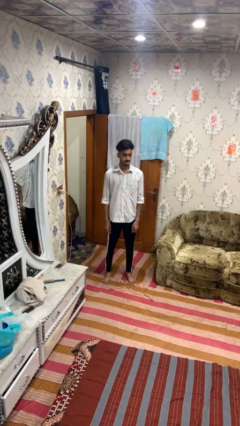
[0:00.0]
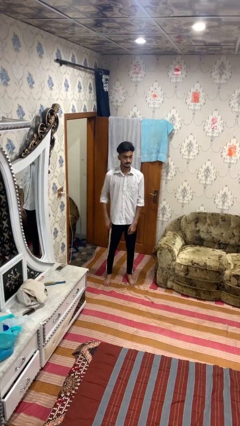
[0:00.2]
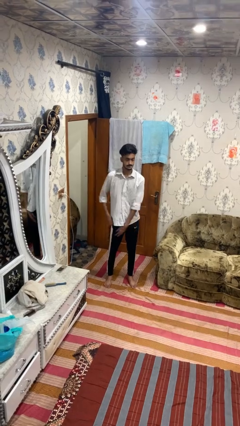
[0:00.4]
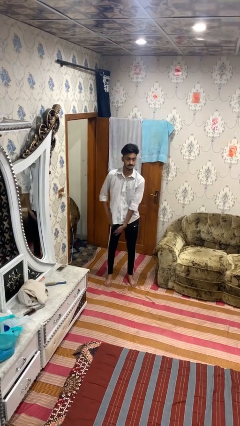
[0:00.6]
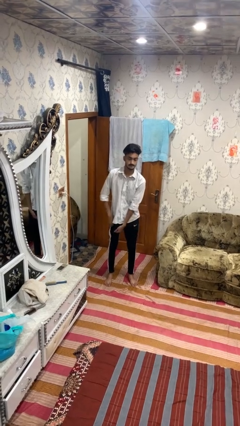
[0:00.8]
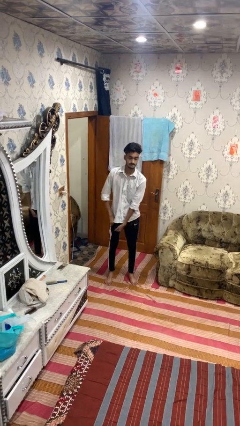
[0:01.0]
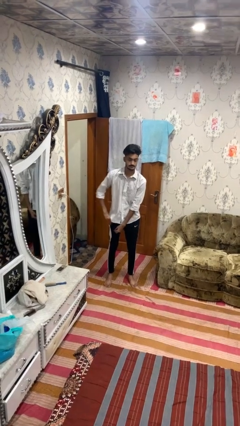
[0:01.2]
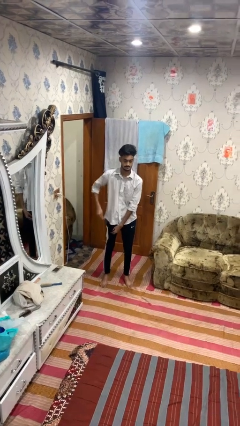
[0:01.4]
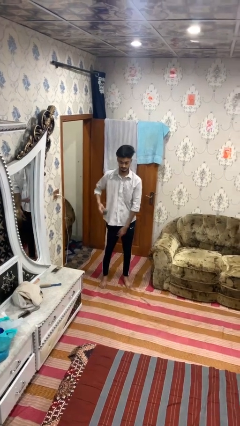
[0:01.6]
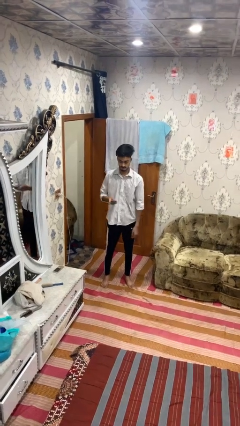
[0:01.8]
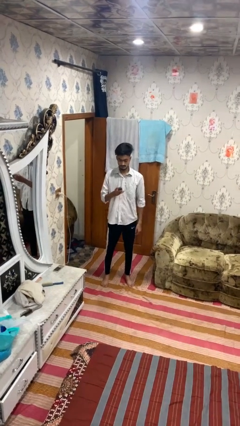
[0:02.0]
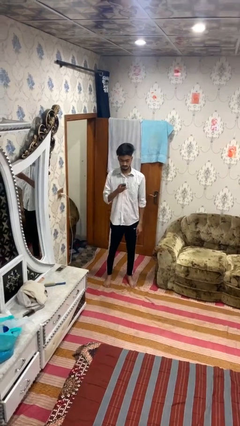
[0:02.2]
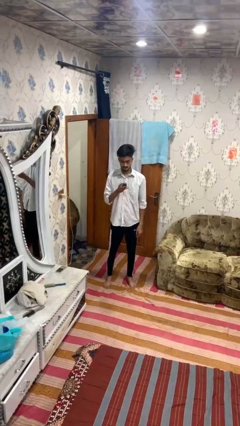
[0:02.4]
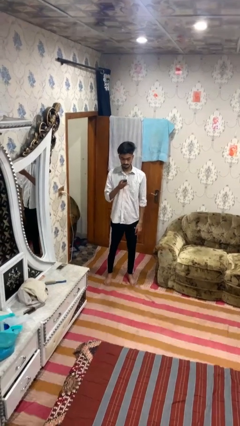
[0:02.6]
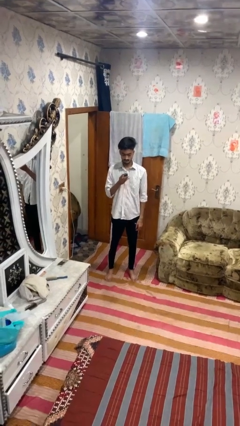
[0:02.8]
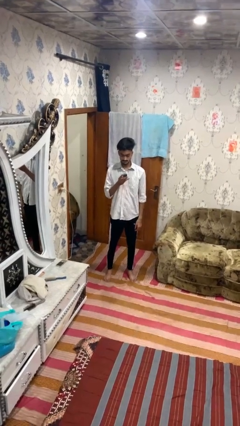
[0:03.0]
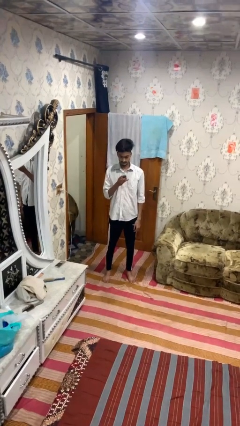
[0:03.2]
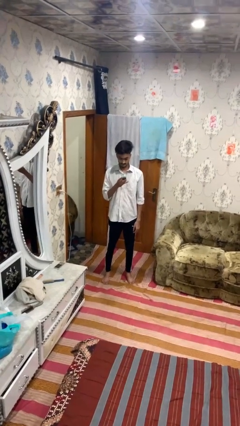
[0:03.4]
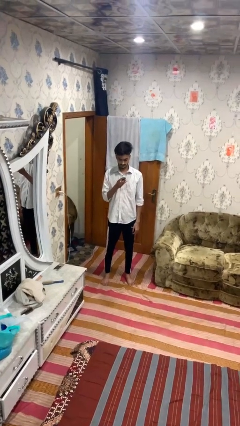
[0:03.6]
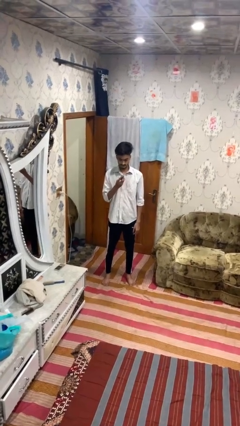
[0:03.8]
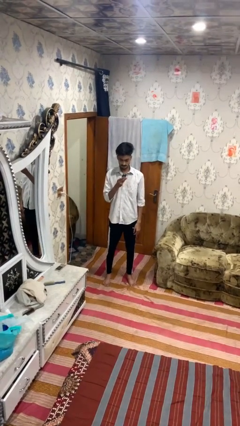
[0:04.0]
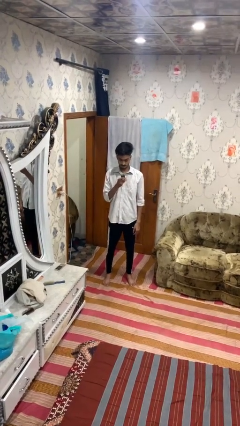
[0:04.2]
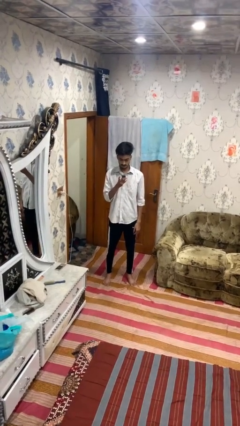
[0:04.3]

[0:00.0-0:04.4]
person takes phone from pocket

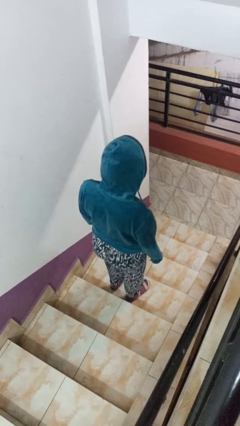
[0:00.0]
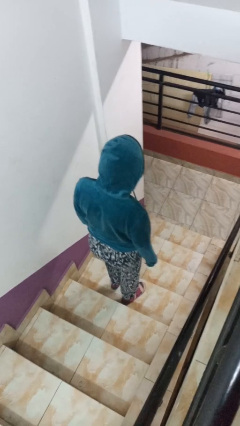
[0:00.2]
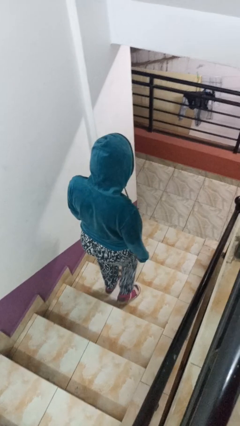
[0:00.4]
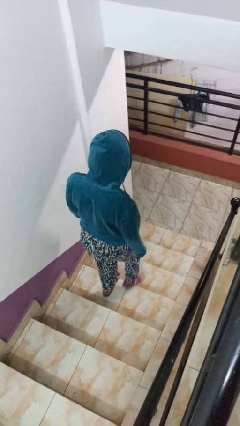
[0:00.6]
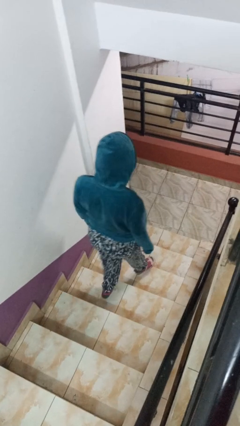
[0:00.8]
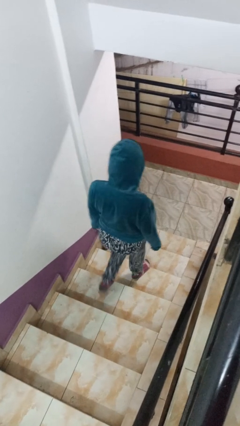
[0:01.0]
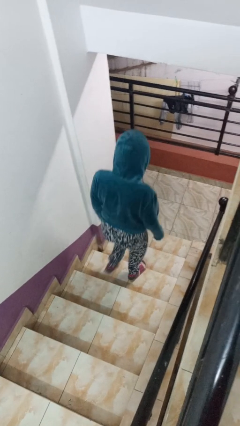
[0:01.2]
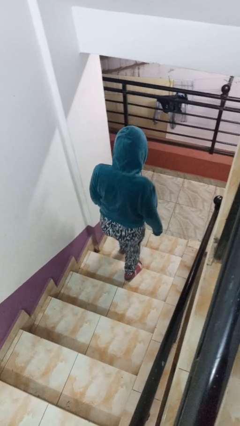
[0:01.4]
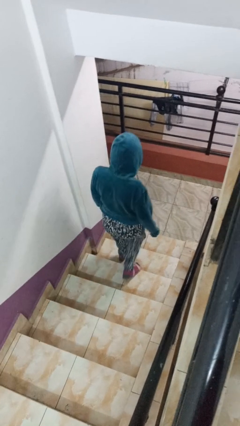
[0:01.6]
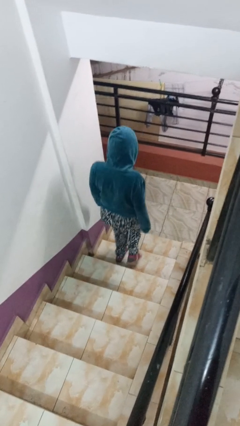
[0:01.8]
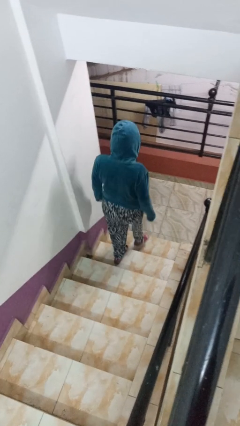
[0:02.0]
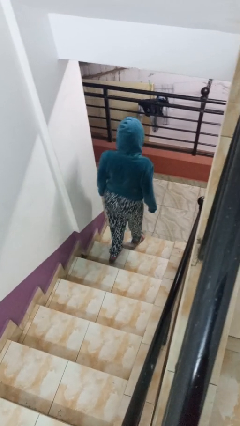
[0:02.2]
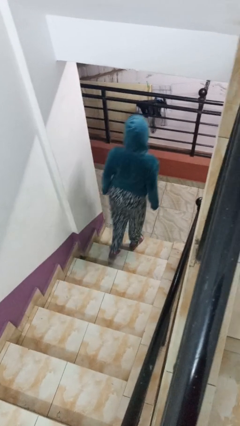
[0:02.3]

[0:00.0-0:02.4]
person climbs down stairs

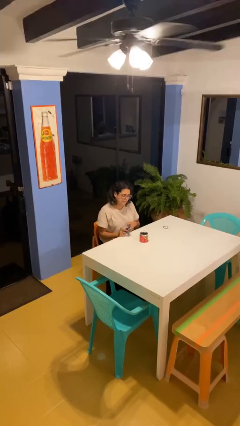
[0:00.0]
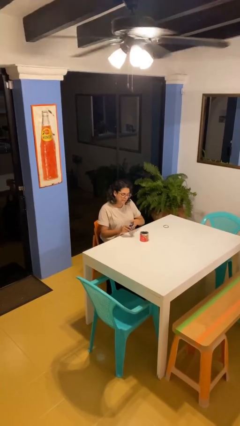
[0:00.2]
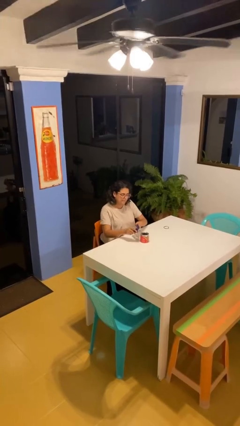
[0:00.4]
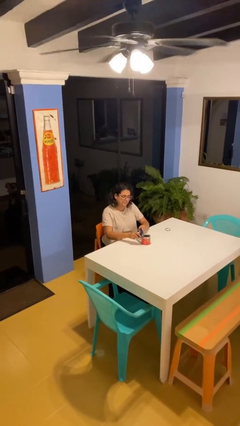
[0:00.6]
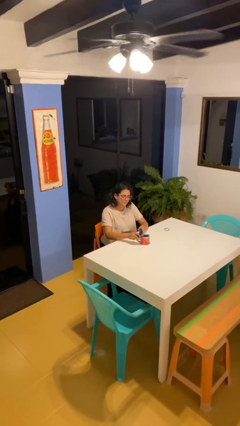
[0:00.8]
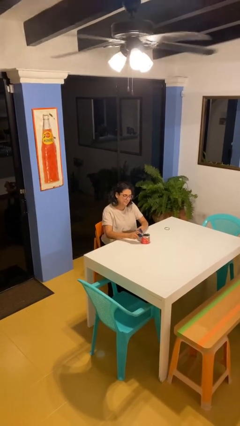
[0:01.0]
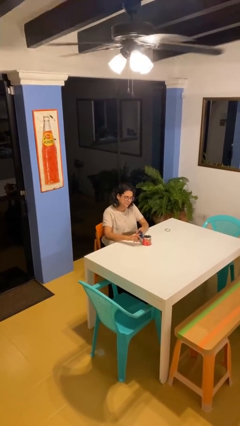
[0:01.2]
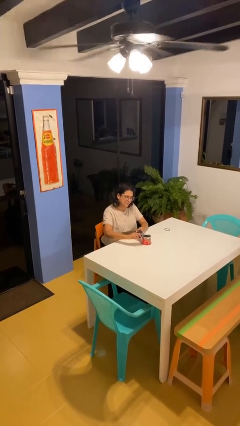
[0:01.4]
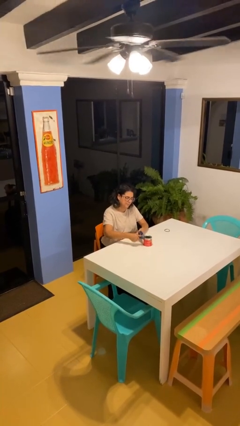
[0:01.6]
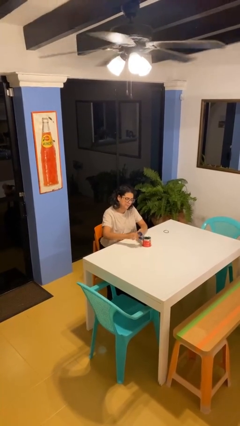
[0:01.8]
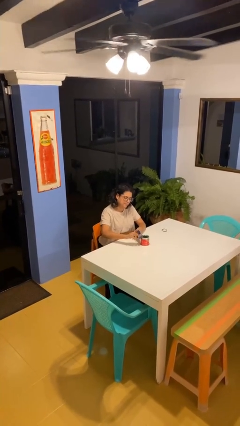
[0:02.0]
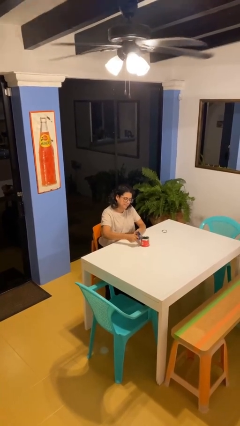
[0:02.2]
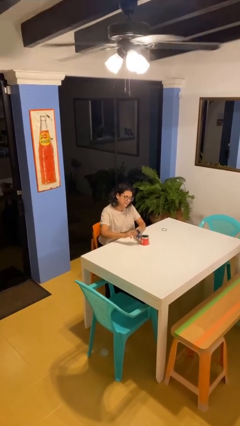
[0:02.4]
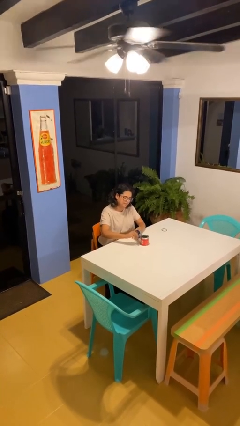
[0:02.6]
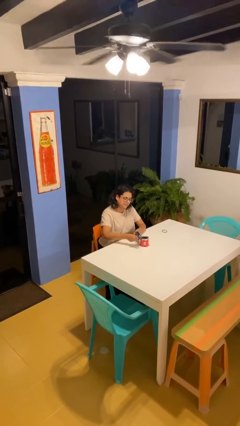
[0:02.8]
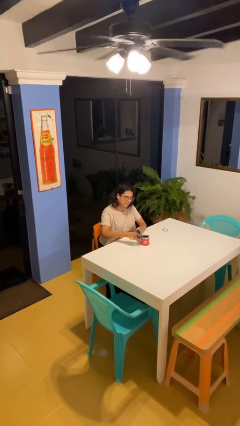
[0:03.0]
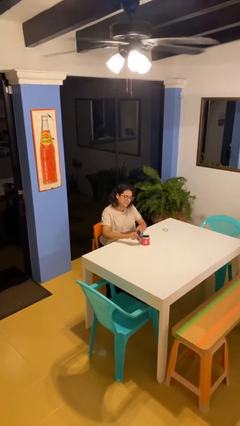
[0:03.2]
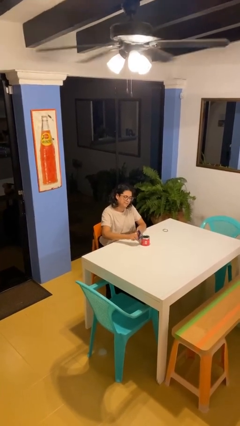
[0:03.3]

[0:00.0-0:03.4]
person opens can with can opener

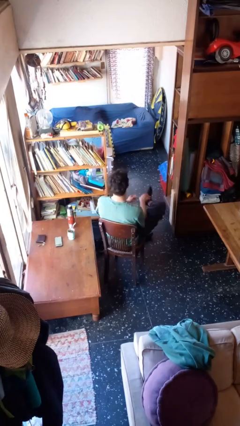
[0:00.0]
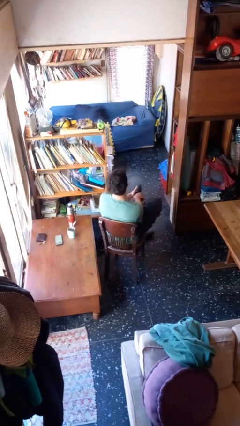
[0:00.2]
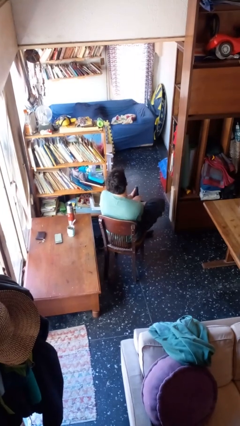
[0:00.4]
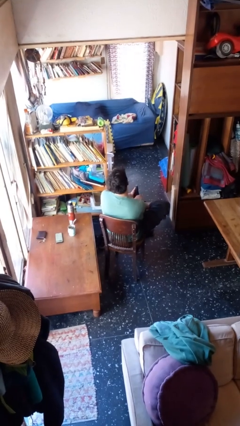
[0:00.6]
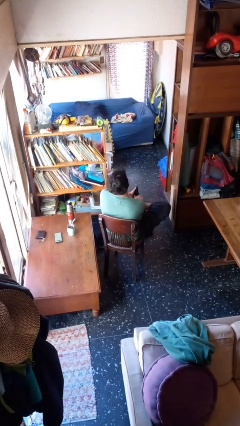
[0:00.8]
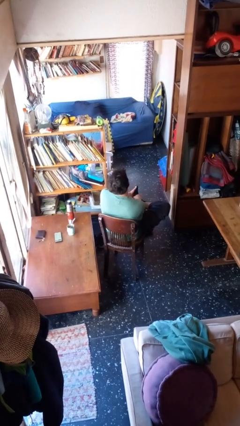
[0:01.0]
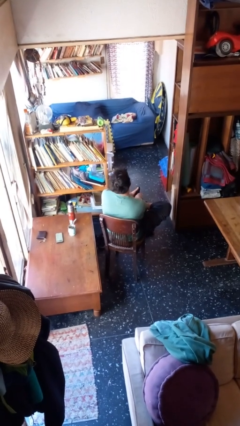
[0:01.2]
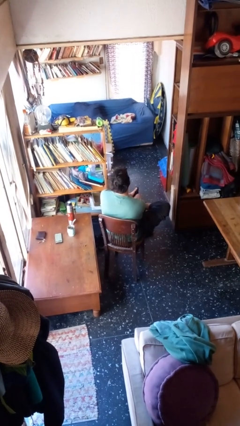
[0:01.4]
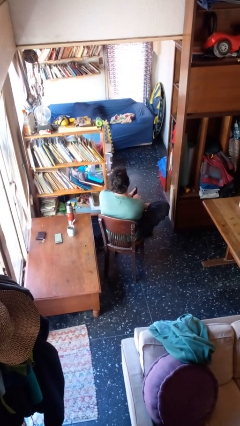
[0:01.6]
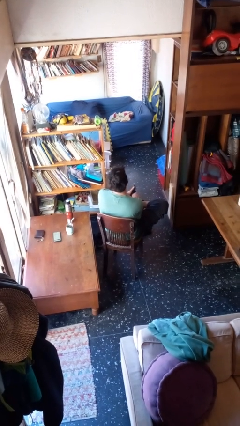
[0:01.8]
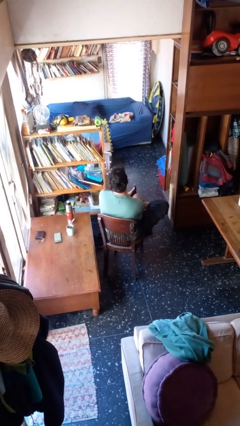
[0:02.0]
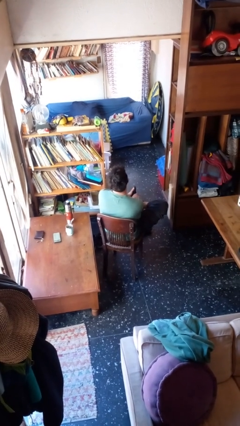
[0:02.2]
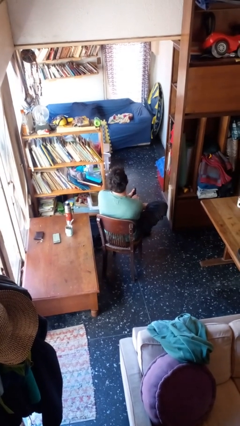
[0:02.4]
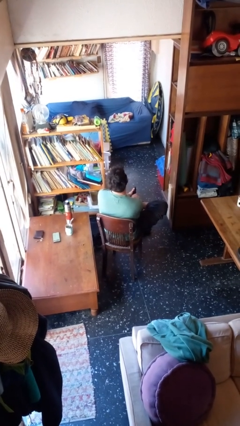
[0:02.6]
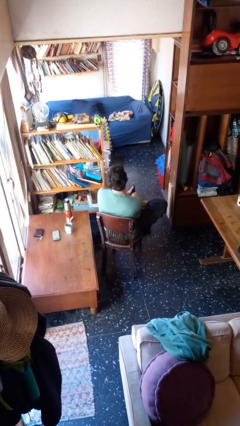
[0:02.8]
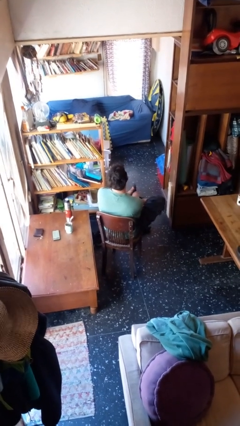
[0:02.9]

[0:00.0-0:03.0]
person rubs foot

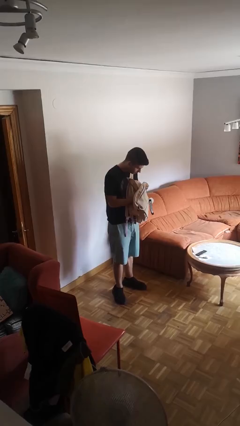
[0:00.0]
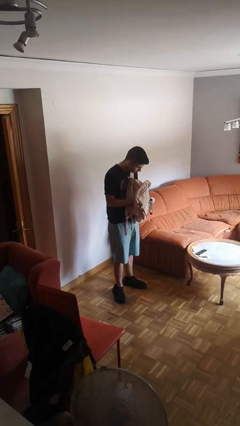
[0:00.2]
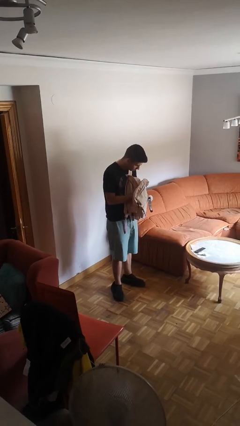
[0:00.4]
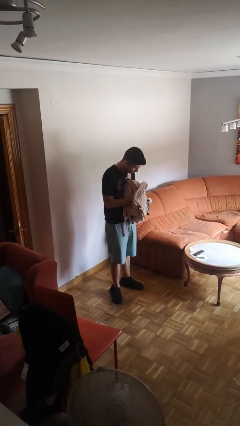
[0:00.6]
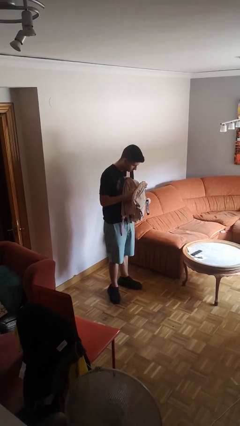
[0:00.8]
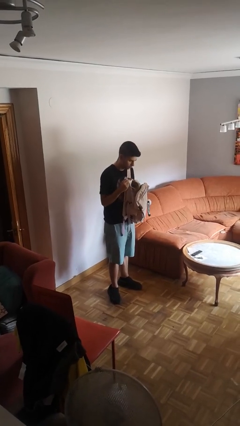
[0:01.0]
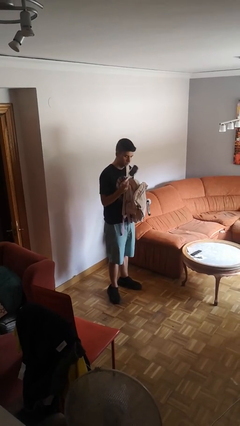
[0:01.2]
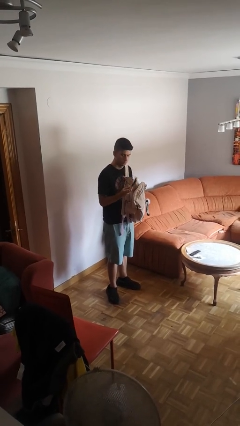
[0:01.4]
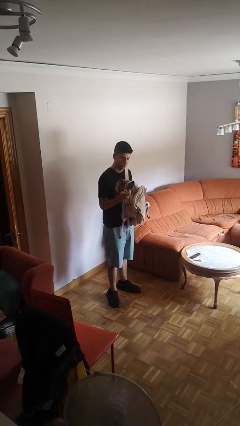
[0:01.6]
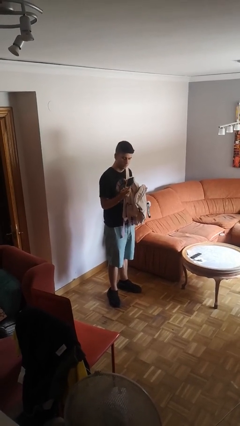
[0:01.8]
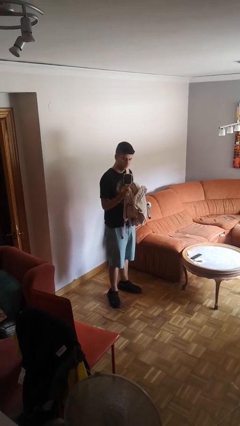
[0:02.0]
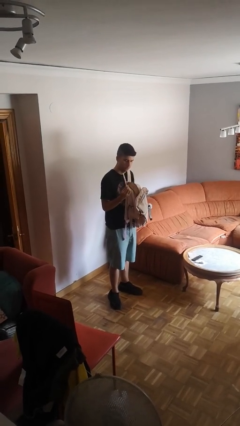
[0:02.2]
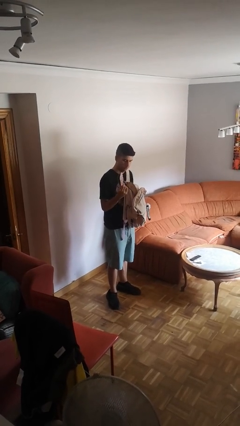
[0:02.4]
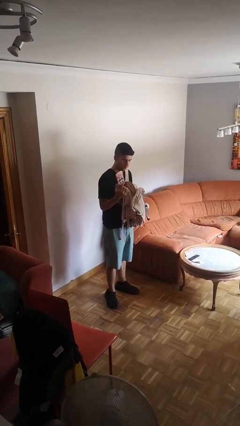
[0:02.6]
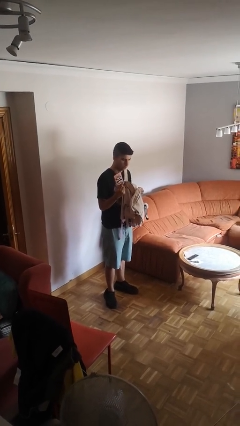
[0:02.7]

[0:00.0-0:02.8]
person takes object from backpack

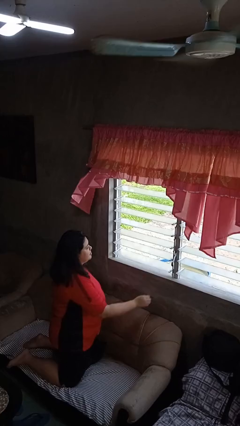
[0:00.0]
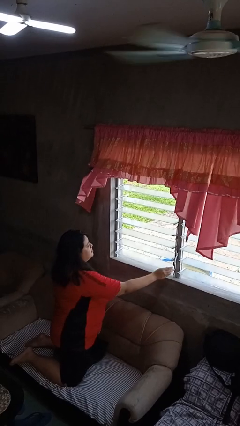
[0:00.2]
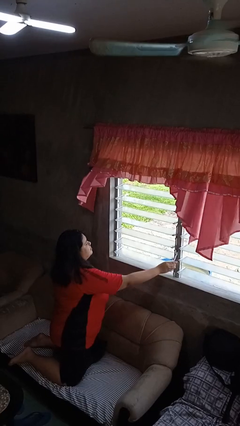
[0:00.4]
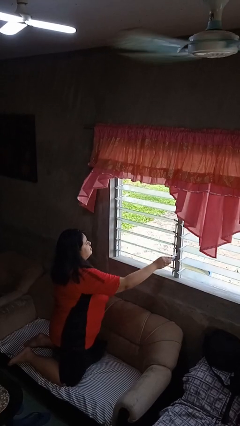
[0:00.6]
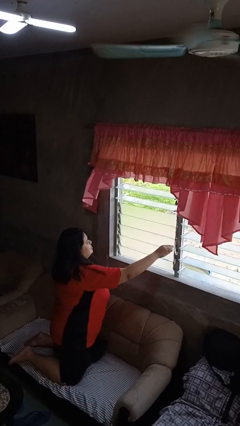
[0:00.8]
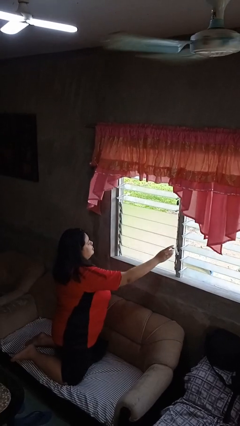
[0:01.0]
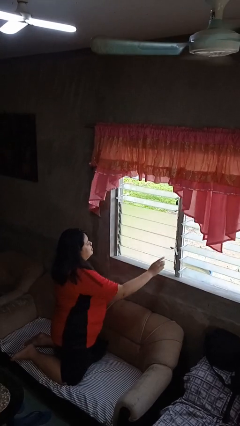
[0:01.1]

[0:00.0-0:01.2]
person closes home window
